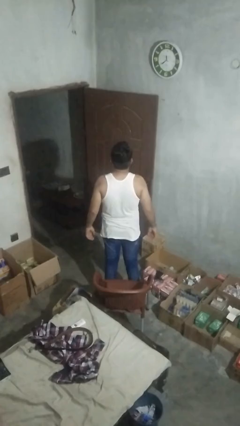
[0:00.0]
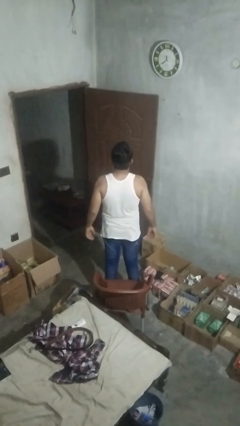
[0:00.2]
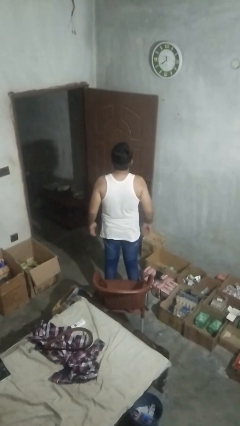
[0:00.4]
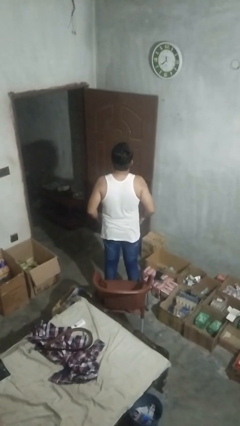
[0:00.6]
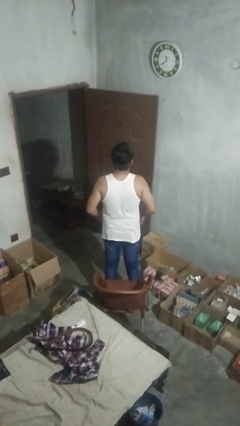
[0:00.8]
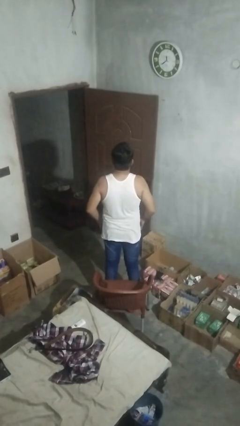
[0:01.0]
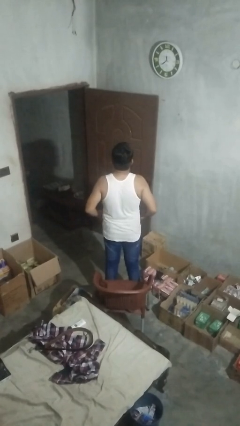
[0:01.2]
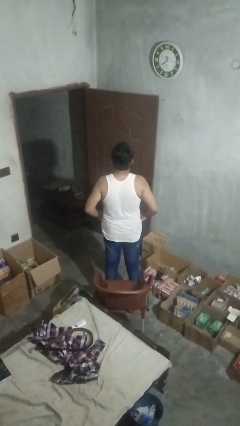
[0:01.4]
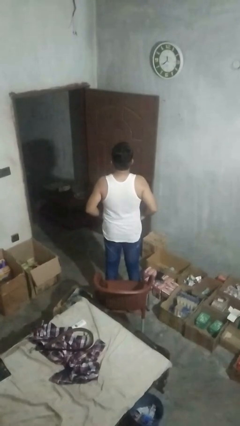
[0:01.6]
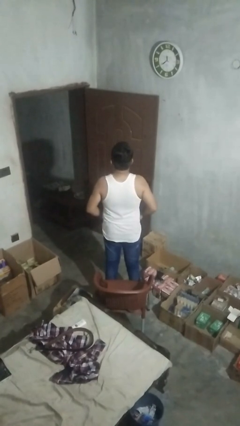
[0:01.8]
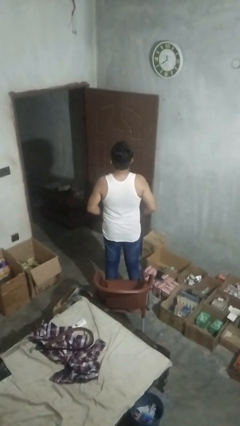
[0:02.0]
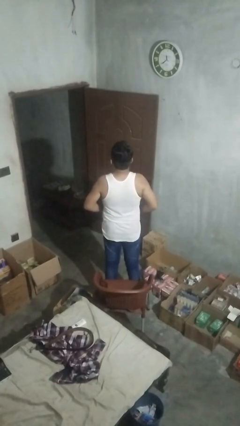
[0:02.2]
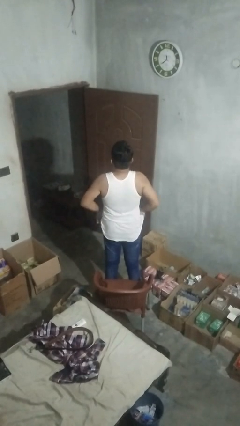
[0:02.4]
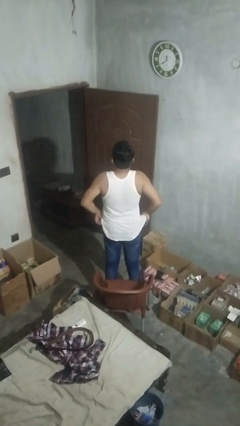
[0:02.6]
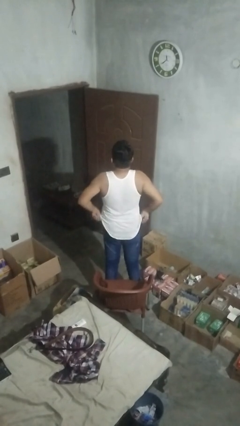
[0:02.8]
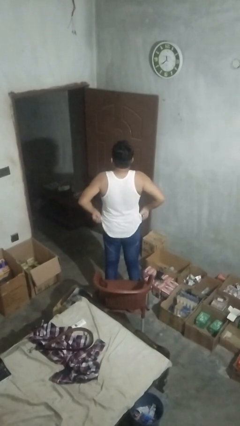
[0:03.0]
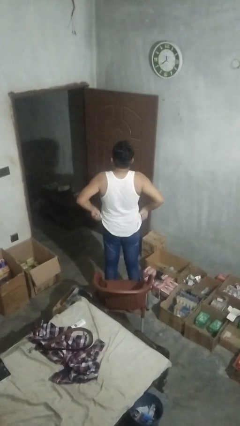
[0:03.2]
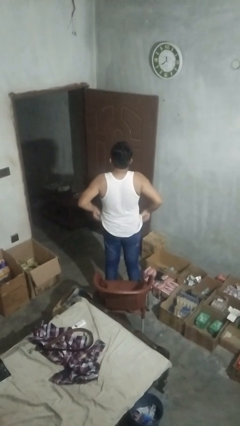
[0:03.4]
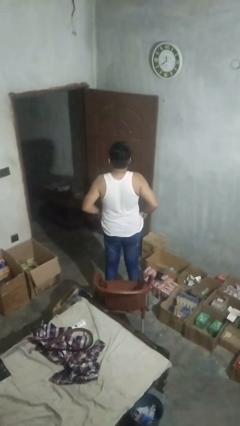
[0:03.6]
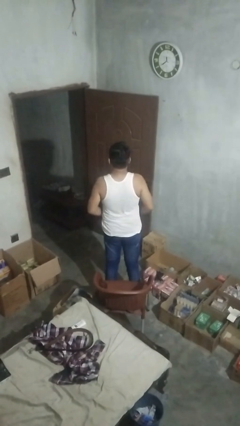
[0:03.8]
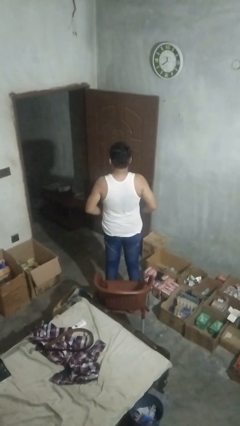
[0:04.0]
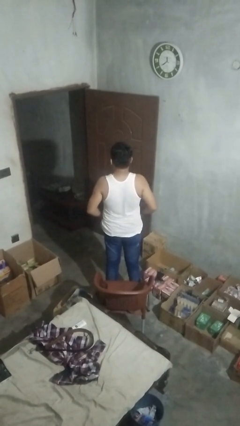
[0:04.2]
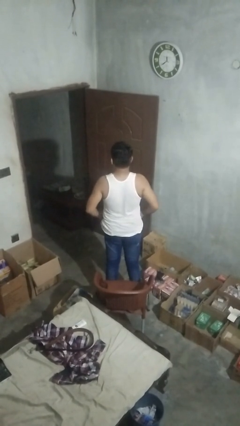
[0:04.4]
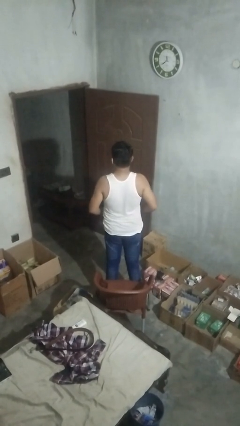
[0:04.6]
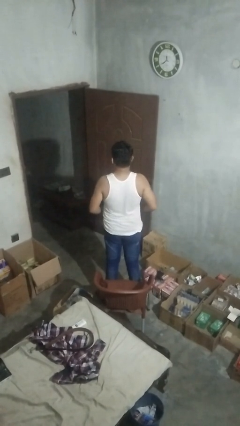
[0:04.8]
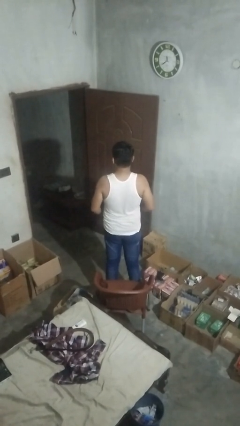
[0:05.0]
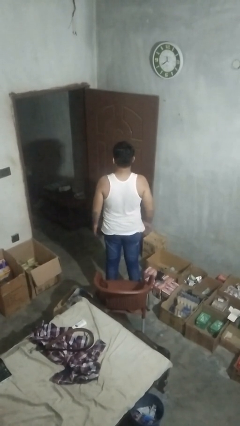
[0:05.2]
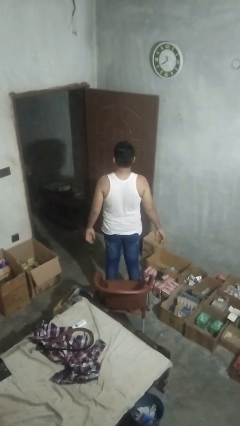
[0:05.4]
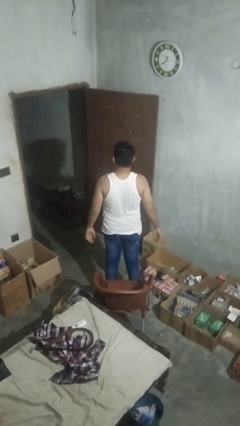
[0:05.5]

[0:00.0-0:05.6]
person hikes up pants

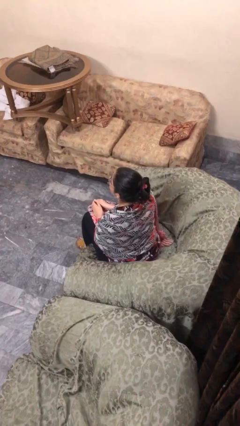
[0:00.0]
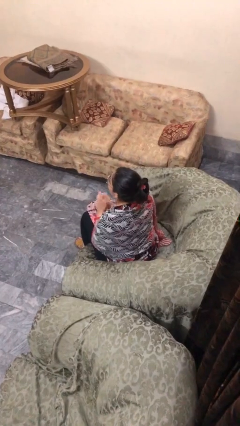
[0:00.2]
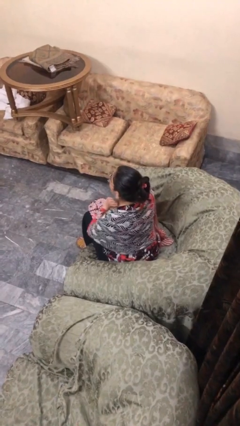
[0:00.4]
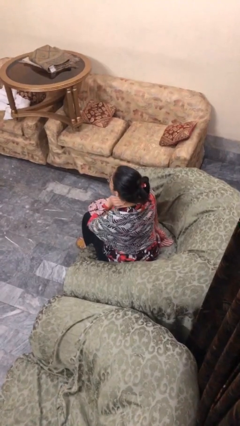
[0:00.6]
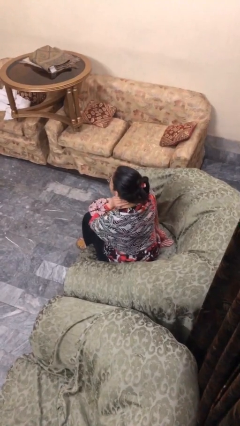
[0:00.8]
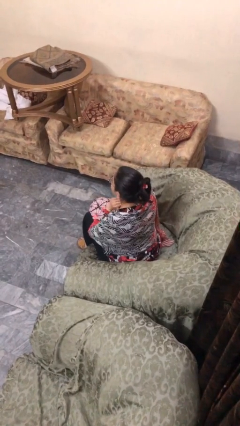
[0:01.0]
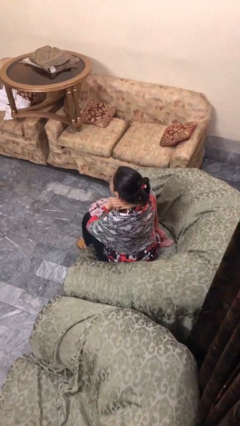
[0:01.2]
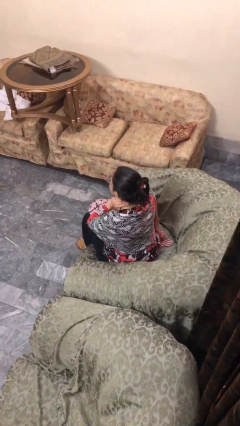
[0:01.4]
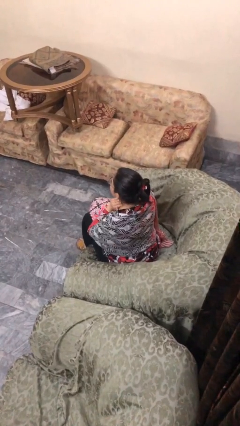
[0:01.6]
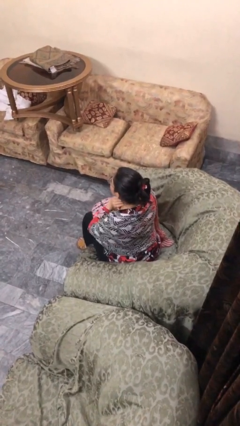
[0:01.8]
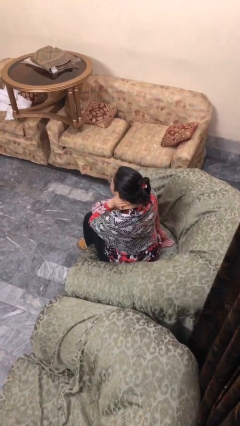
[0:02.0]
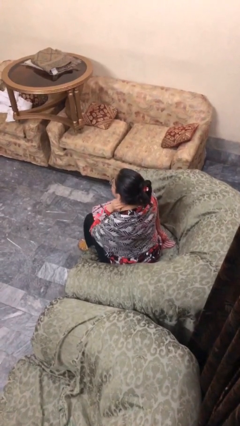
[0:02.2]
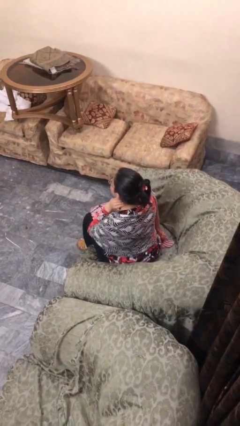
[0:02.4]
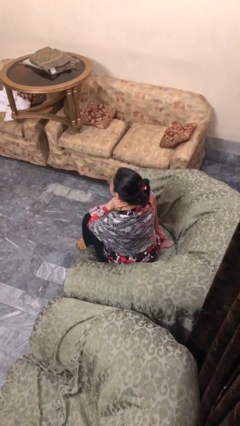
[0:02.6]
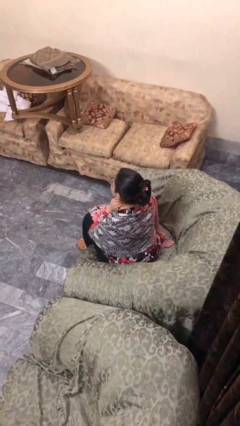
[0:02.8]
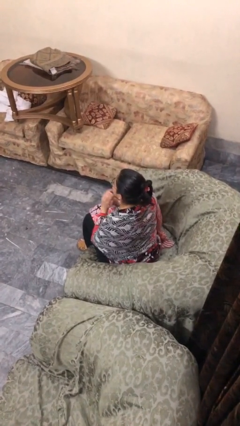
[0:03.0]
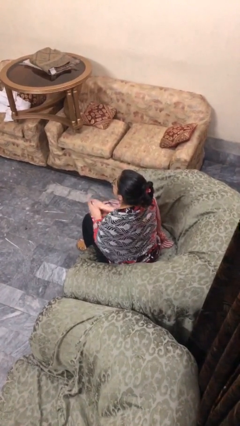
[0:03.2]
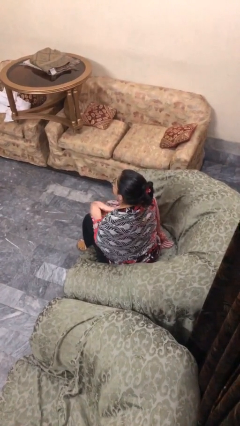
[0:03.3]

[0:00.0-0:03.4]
person rubs neck

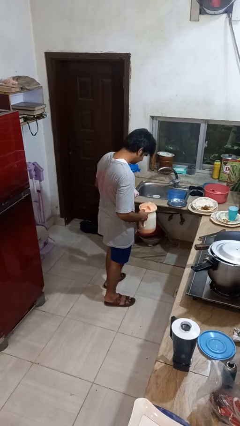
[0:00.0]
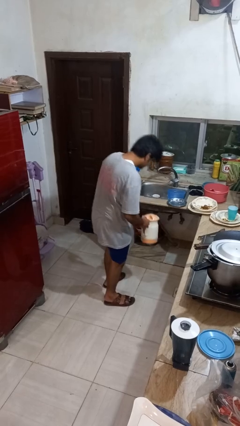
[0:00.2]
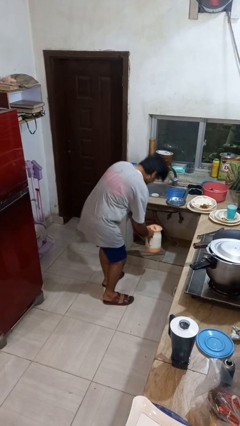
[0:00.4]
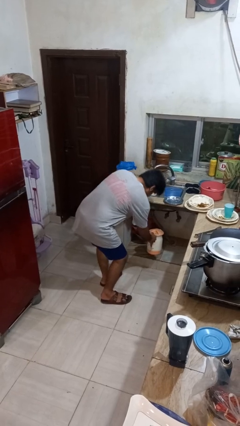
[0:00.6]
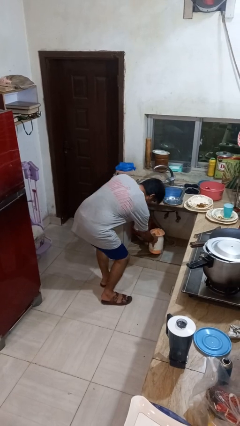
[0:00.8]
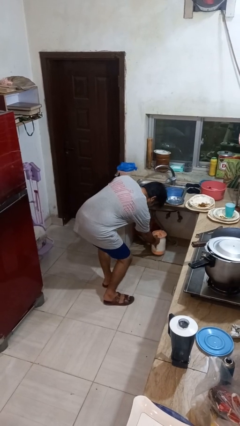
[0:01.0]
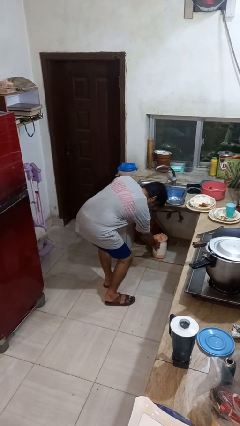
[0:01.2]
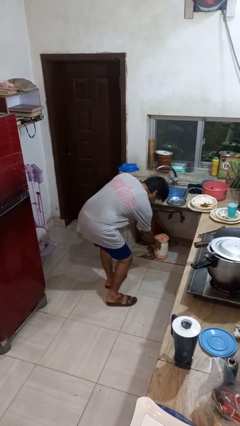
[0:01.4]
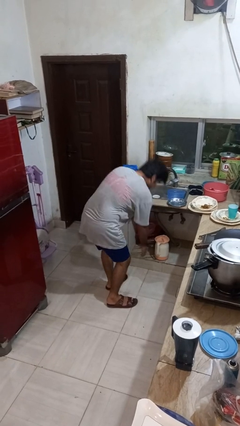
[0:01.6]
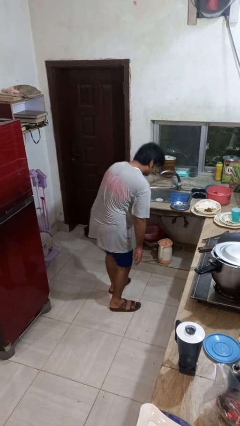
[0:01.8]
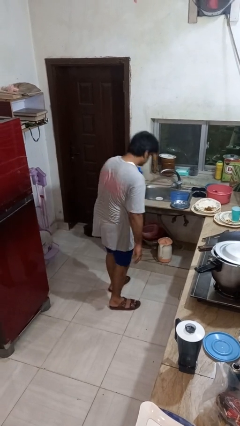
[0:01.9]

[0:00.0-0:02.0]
person puts down object into cabinet

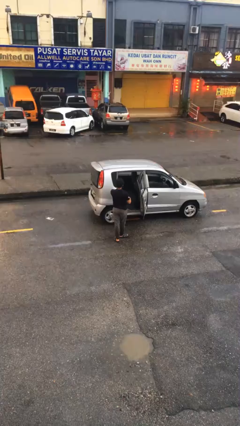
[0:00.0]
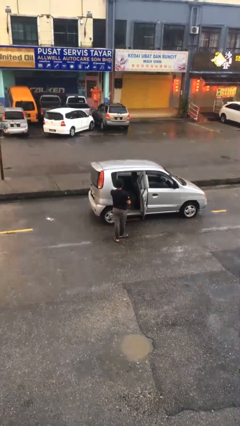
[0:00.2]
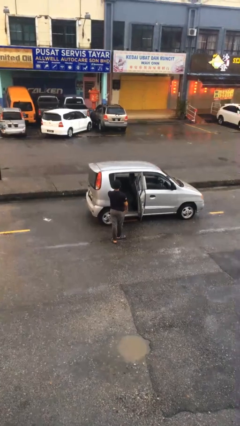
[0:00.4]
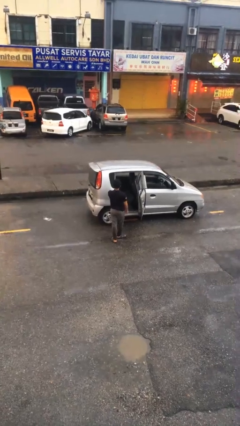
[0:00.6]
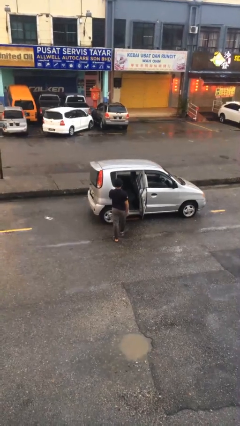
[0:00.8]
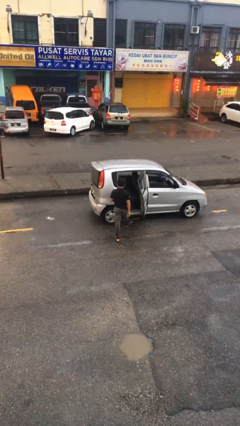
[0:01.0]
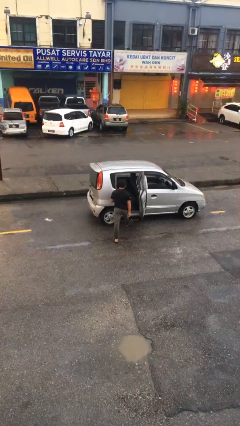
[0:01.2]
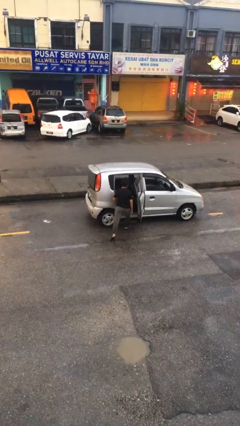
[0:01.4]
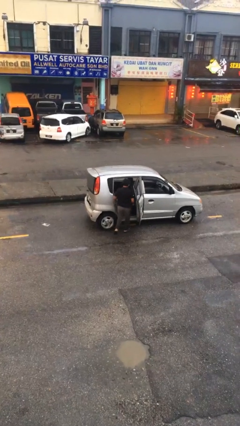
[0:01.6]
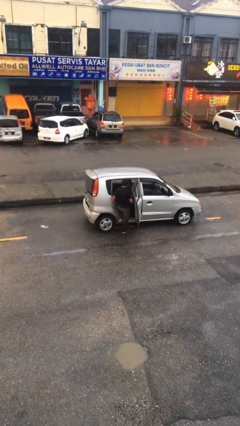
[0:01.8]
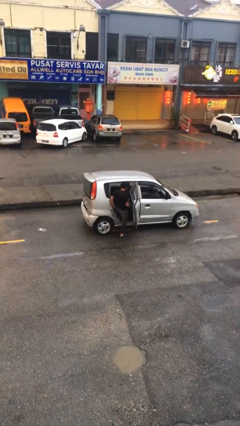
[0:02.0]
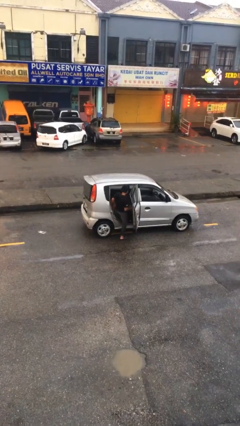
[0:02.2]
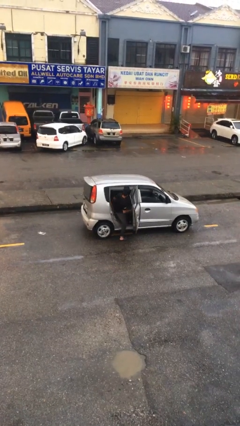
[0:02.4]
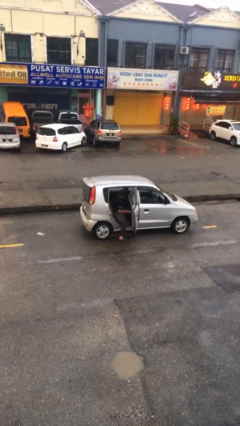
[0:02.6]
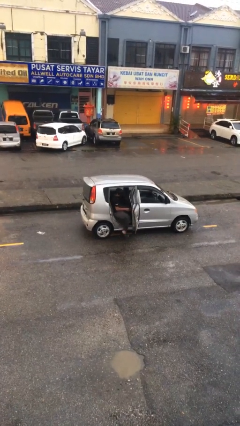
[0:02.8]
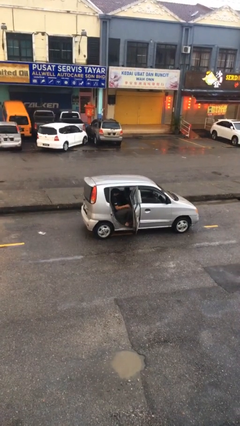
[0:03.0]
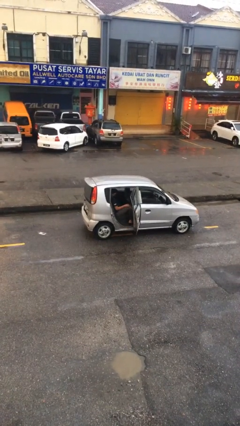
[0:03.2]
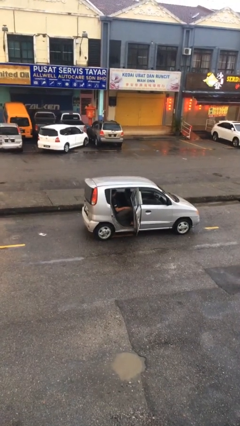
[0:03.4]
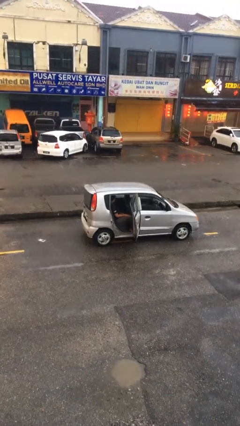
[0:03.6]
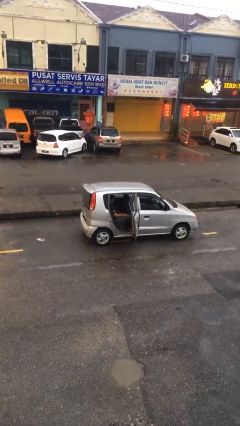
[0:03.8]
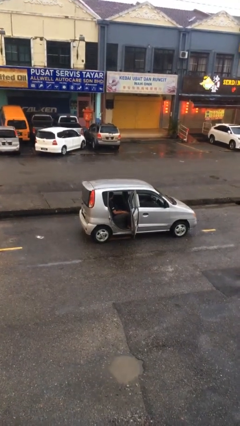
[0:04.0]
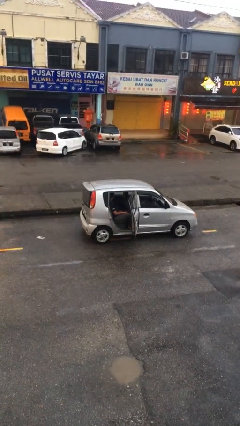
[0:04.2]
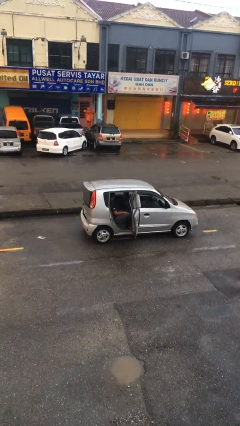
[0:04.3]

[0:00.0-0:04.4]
person enters car

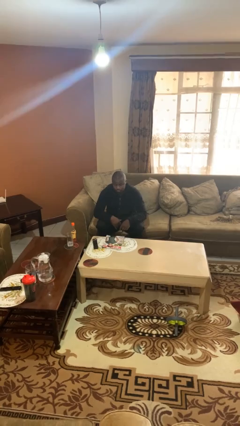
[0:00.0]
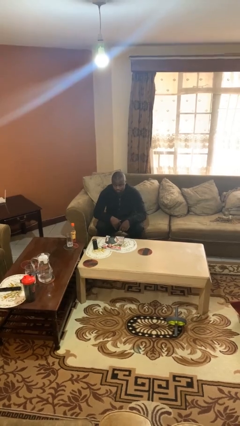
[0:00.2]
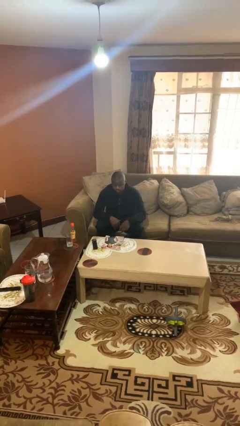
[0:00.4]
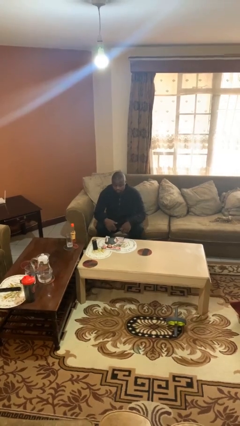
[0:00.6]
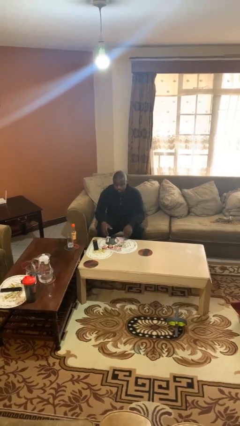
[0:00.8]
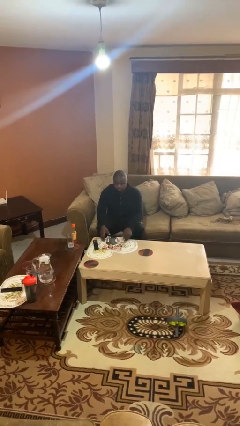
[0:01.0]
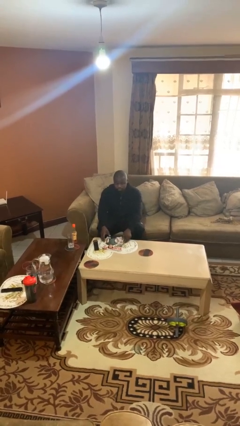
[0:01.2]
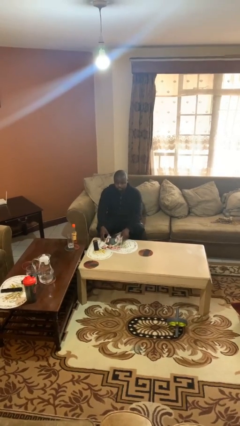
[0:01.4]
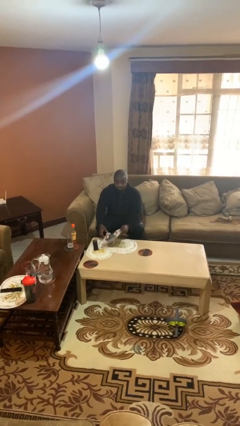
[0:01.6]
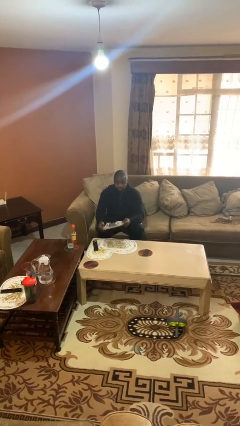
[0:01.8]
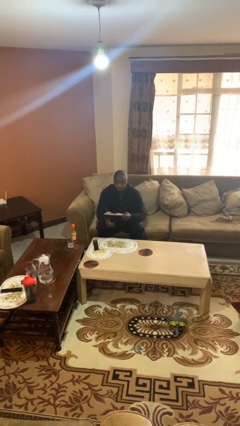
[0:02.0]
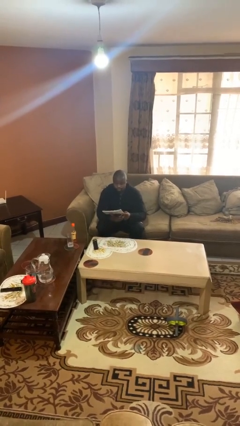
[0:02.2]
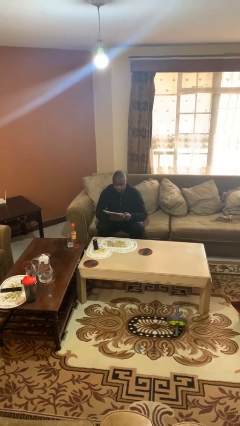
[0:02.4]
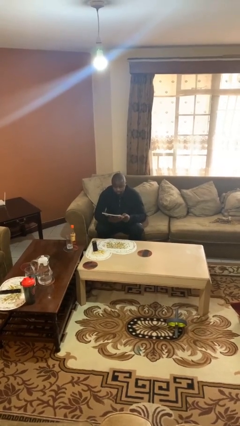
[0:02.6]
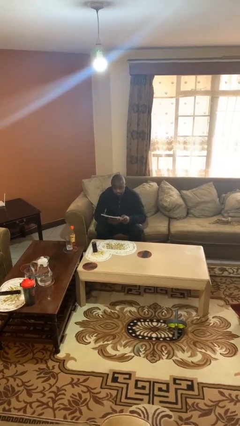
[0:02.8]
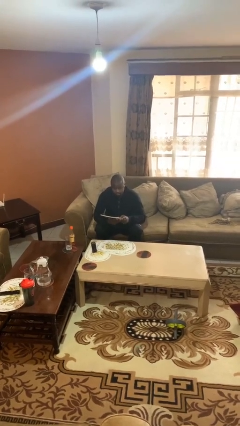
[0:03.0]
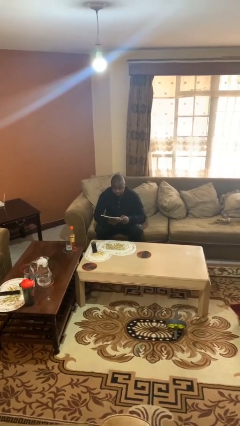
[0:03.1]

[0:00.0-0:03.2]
person picks up object from table
